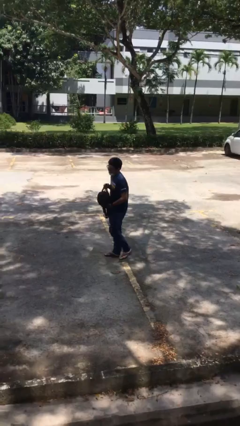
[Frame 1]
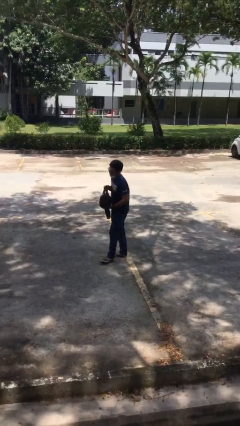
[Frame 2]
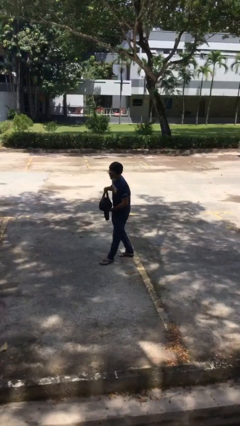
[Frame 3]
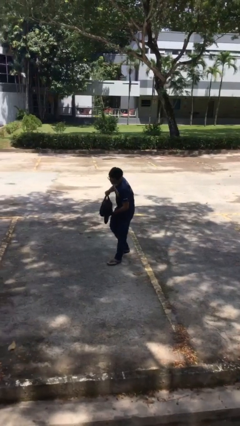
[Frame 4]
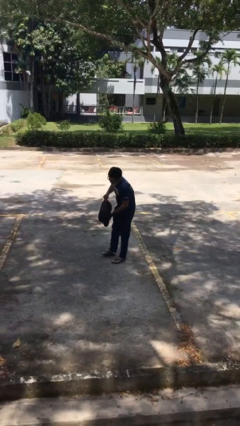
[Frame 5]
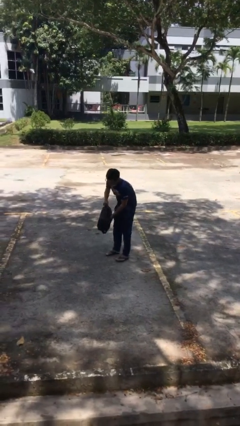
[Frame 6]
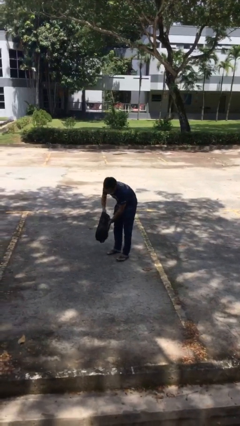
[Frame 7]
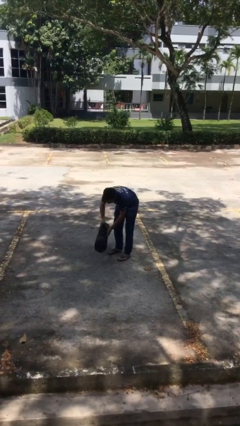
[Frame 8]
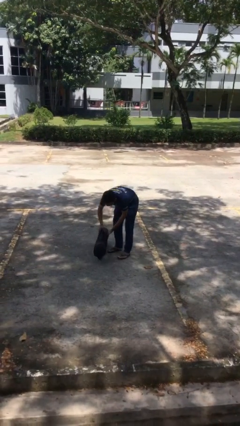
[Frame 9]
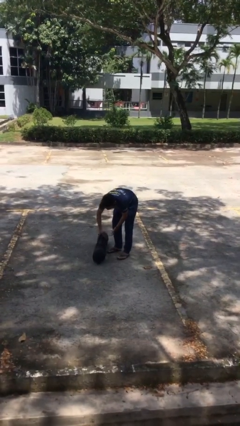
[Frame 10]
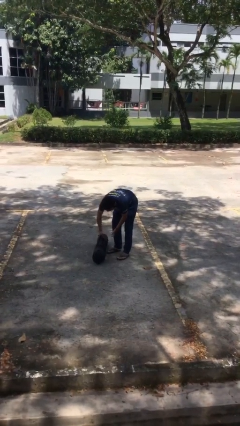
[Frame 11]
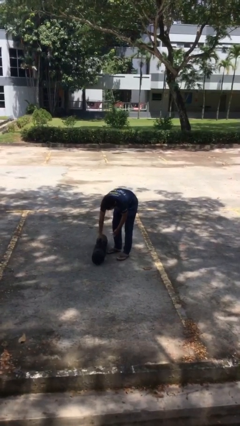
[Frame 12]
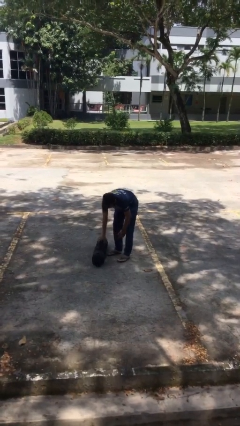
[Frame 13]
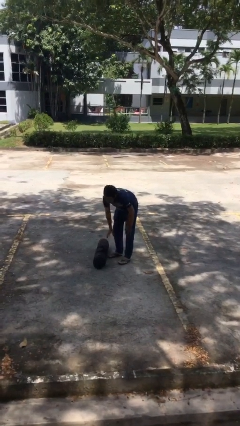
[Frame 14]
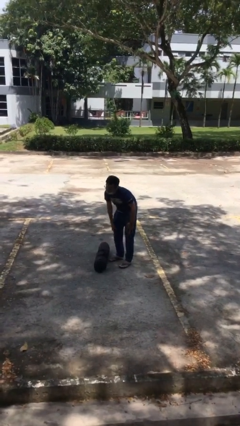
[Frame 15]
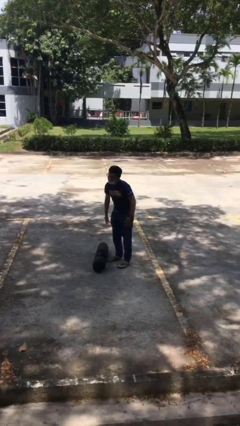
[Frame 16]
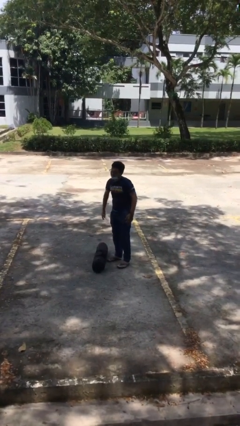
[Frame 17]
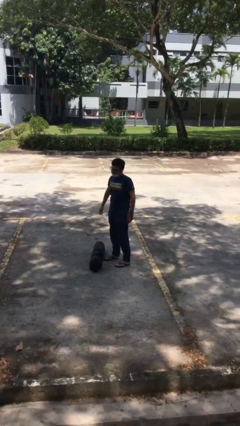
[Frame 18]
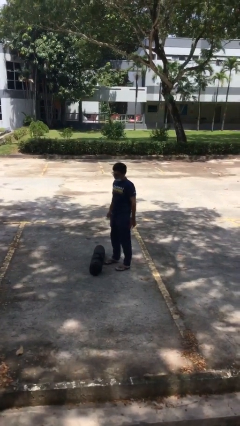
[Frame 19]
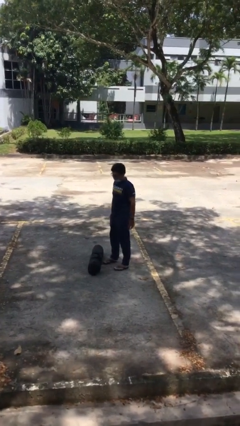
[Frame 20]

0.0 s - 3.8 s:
person puts down object on floor

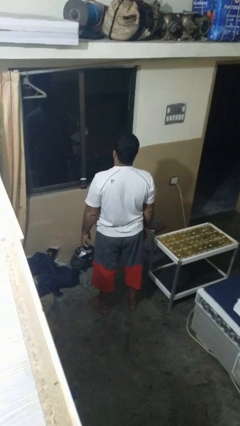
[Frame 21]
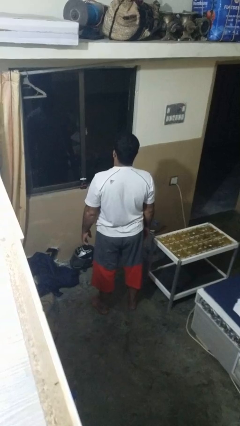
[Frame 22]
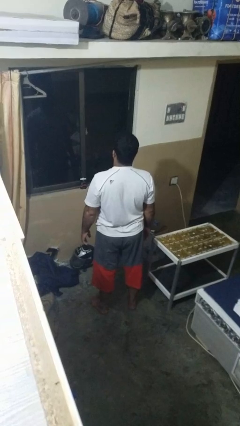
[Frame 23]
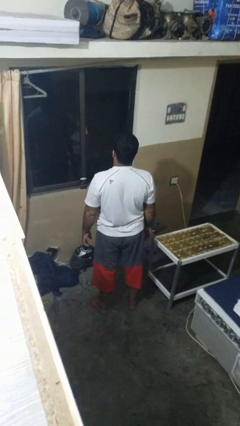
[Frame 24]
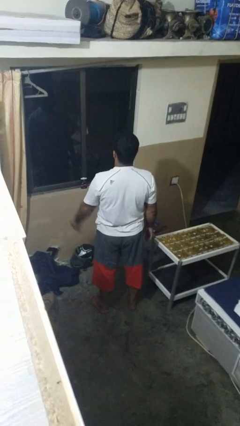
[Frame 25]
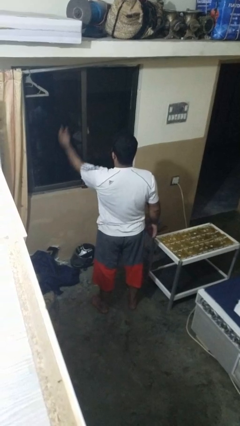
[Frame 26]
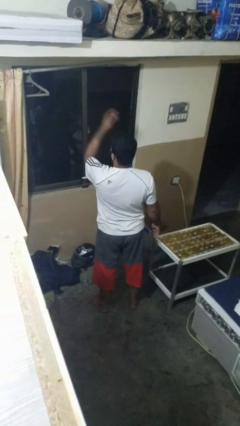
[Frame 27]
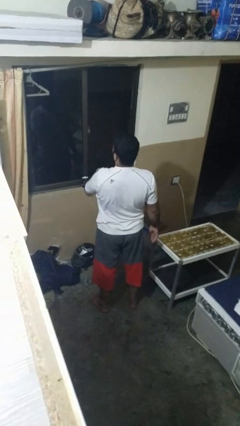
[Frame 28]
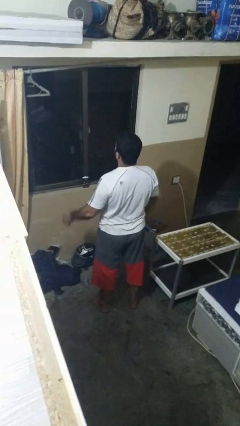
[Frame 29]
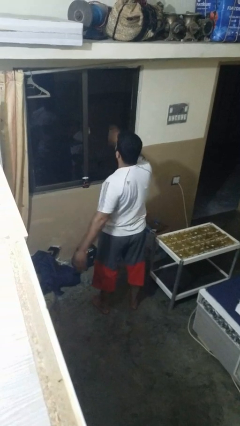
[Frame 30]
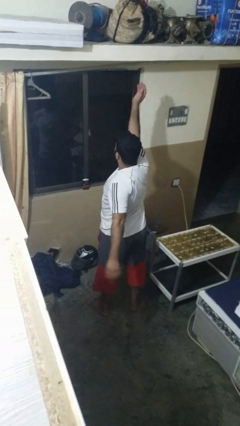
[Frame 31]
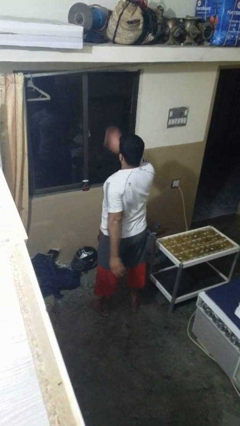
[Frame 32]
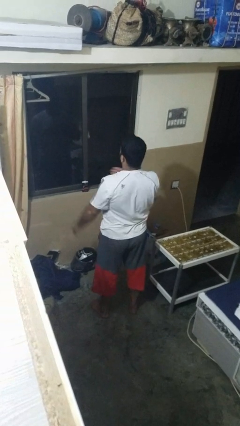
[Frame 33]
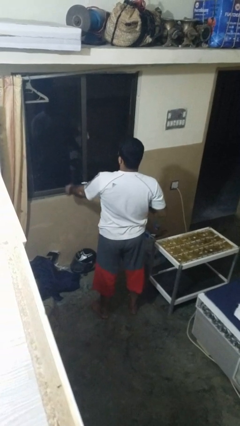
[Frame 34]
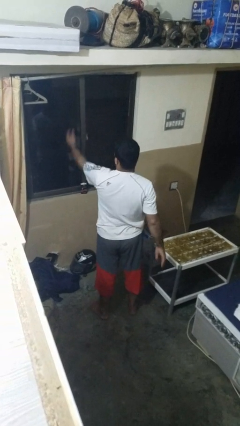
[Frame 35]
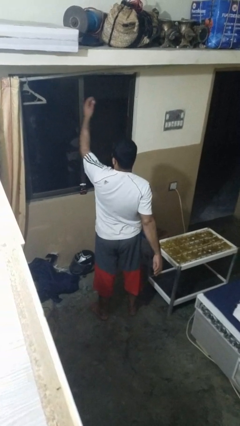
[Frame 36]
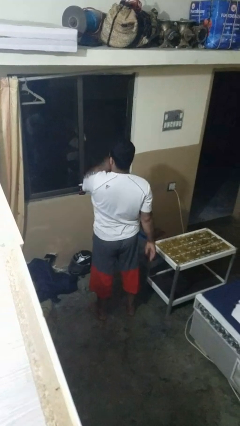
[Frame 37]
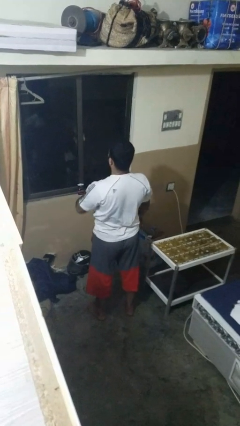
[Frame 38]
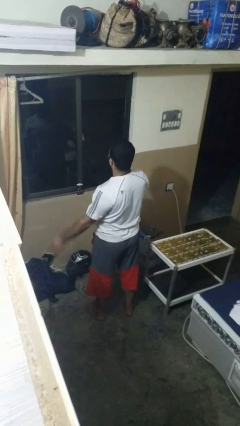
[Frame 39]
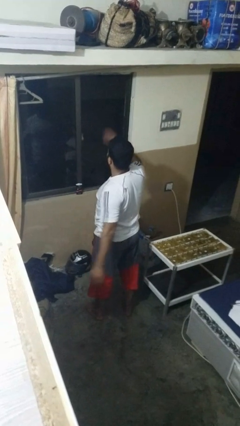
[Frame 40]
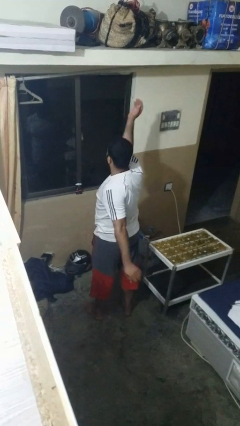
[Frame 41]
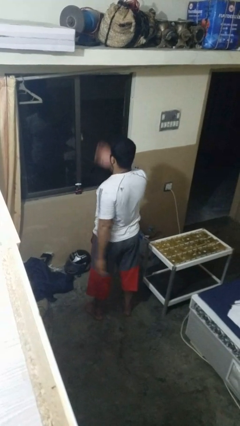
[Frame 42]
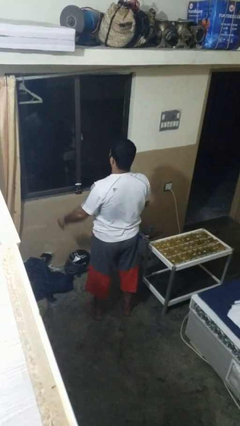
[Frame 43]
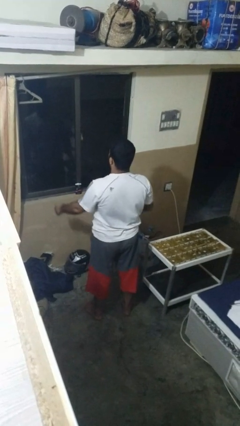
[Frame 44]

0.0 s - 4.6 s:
person drums on chest

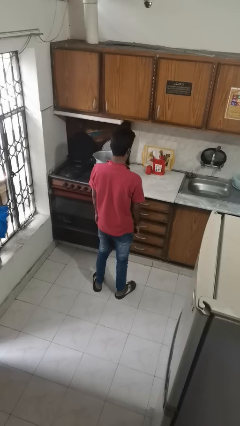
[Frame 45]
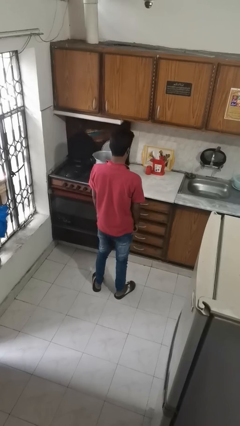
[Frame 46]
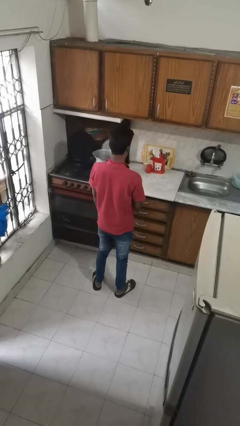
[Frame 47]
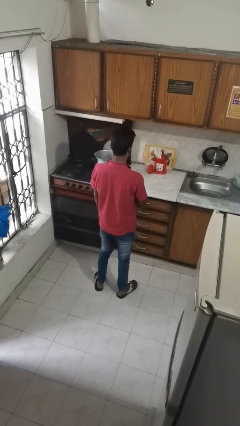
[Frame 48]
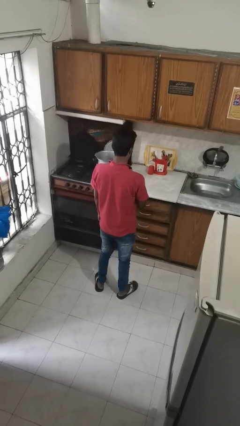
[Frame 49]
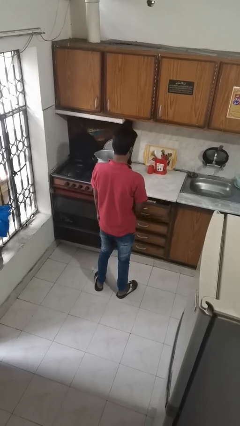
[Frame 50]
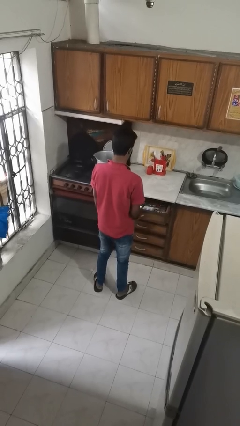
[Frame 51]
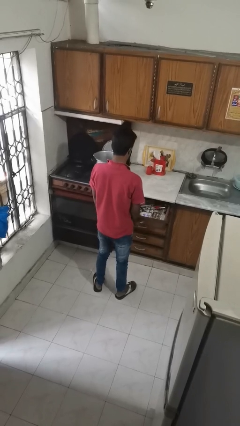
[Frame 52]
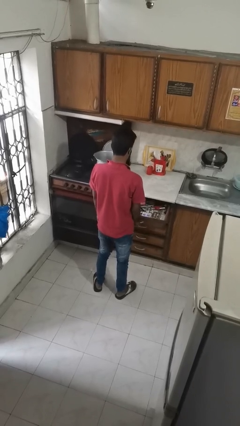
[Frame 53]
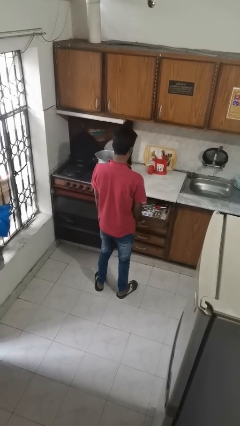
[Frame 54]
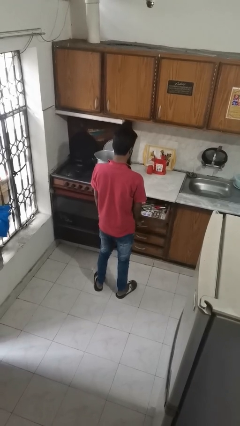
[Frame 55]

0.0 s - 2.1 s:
person opens kitchen drawer

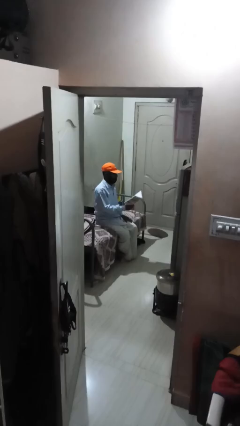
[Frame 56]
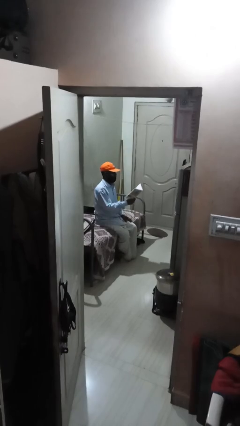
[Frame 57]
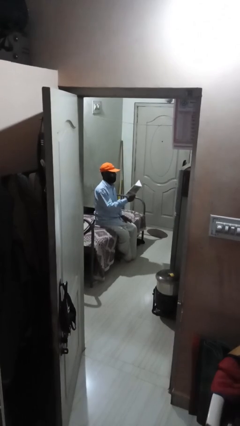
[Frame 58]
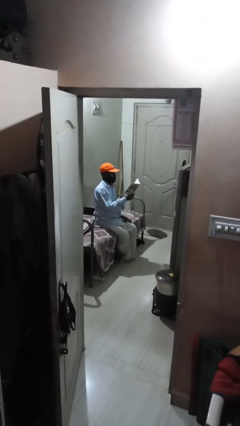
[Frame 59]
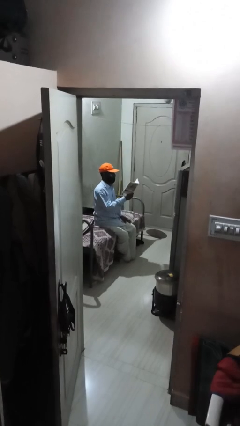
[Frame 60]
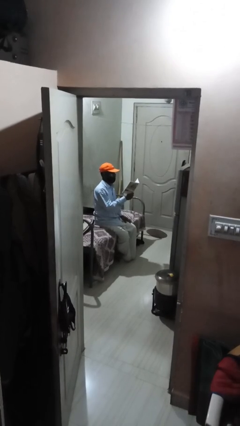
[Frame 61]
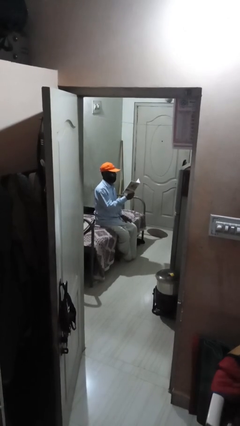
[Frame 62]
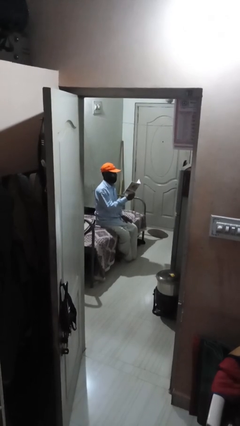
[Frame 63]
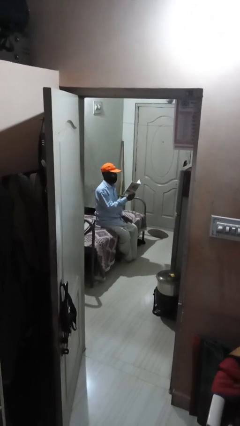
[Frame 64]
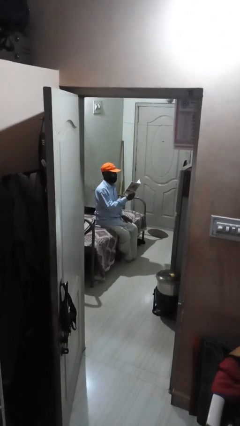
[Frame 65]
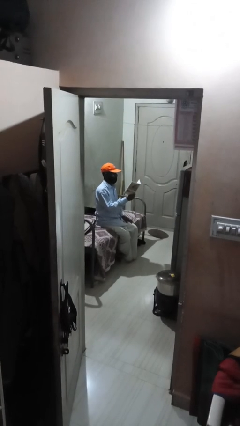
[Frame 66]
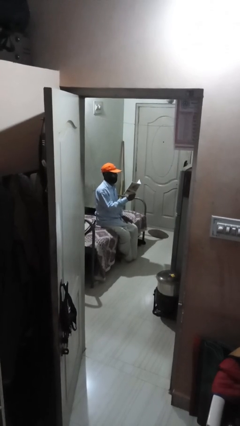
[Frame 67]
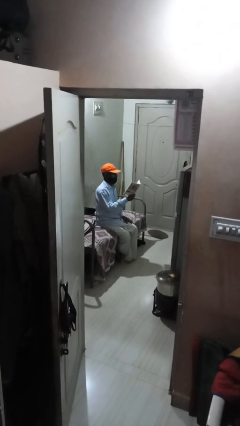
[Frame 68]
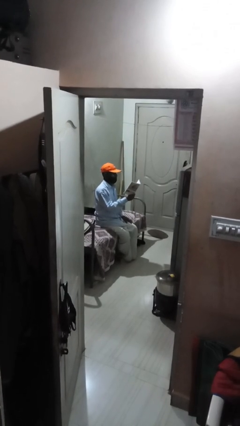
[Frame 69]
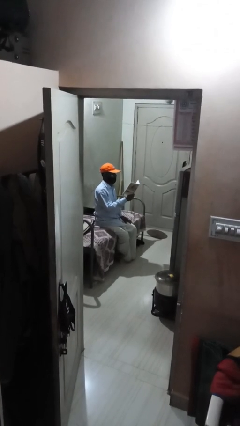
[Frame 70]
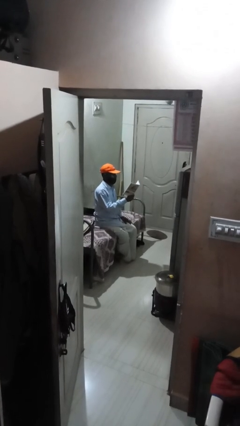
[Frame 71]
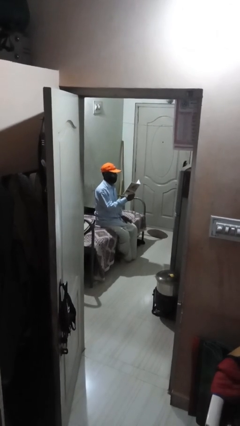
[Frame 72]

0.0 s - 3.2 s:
person reads document

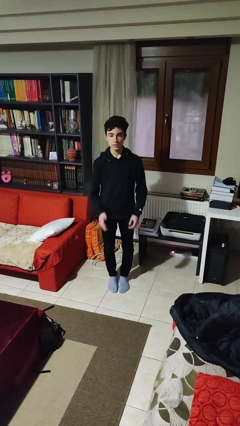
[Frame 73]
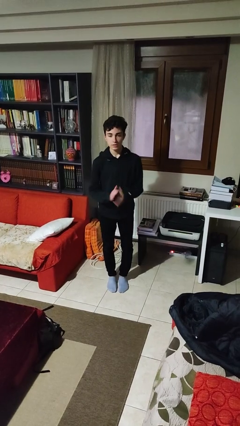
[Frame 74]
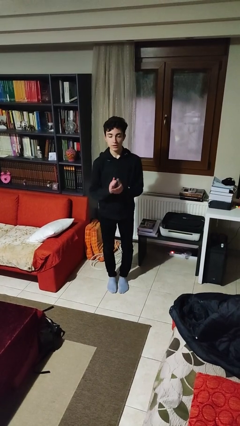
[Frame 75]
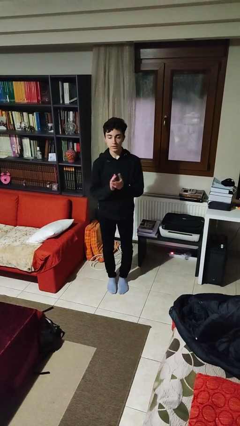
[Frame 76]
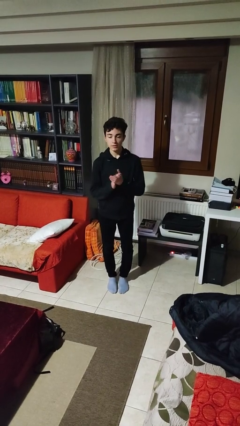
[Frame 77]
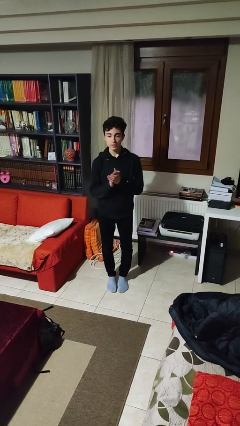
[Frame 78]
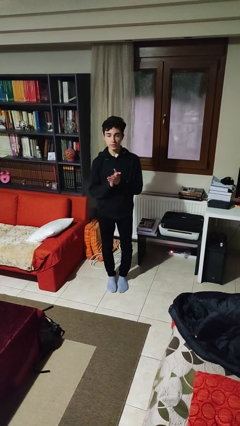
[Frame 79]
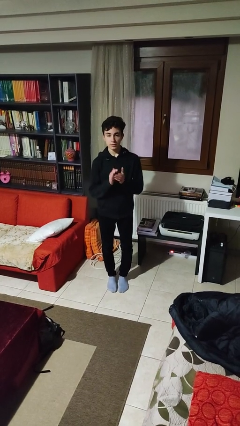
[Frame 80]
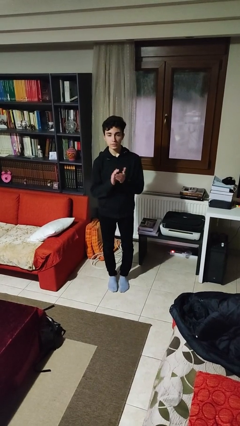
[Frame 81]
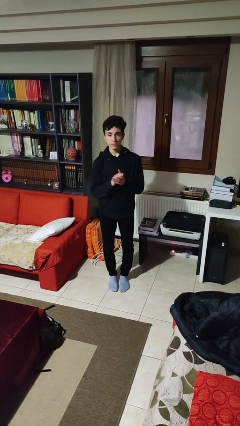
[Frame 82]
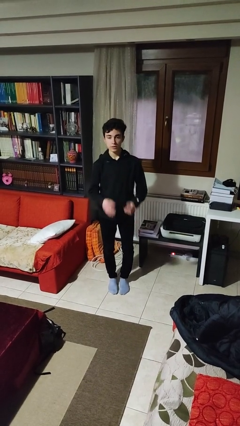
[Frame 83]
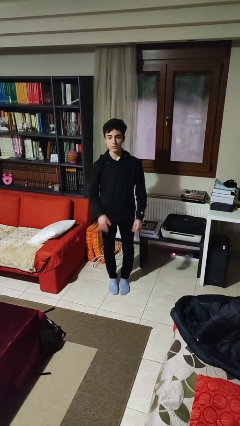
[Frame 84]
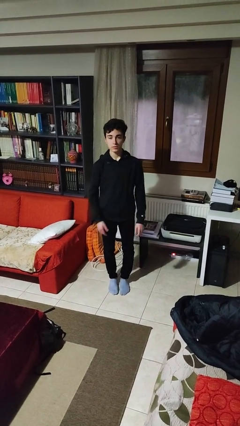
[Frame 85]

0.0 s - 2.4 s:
person claps hands

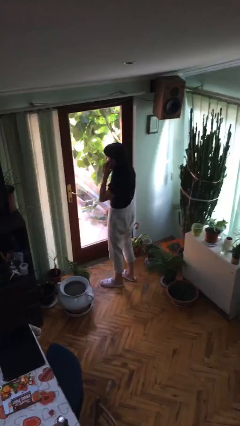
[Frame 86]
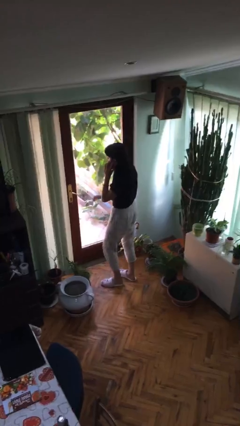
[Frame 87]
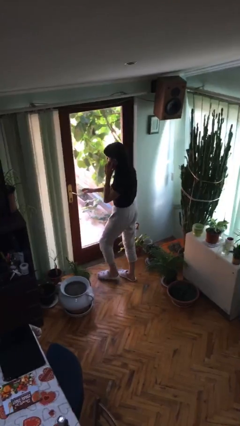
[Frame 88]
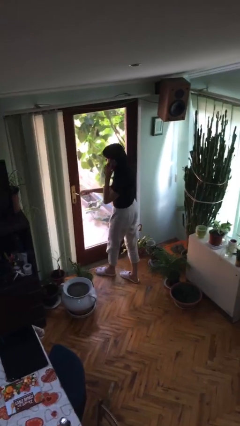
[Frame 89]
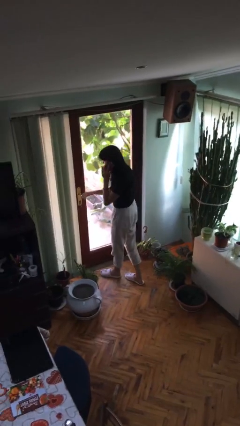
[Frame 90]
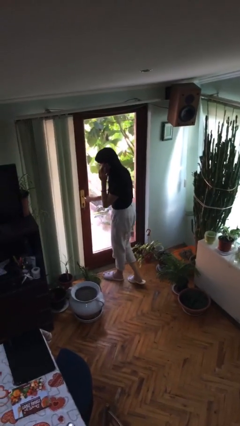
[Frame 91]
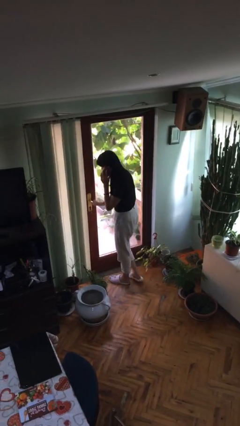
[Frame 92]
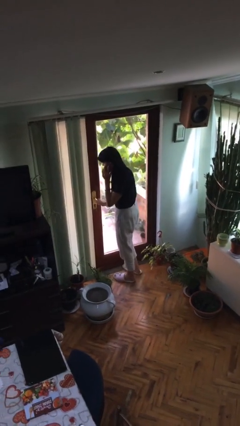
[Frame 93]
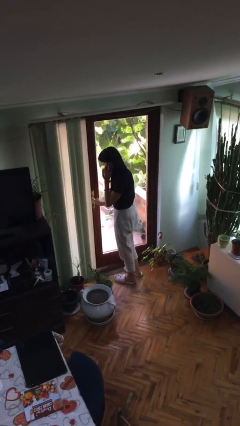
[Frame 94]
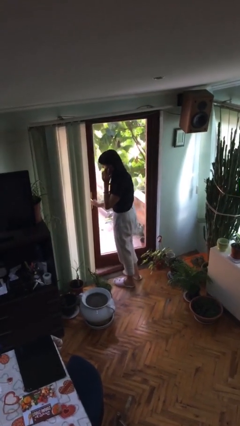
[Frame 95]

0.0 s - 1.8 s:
person opens facility door
